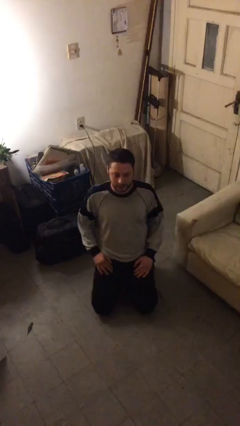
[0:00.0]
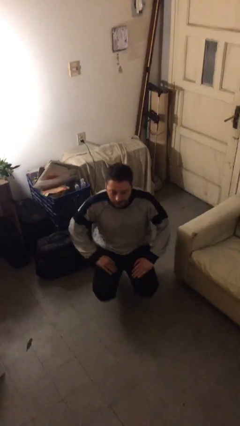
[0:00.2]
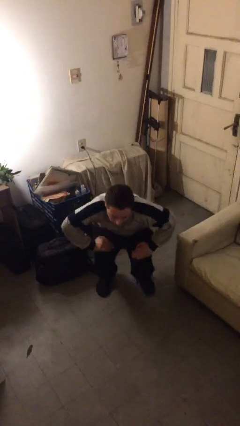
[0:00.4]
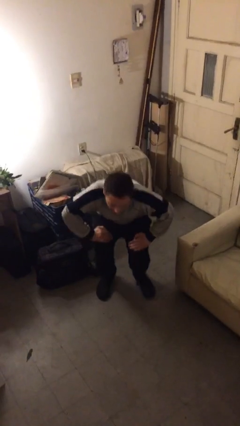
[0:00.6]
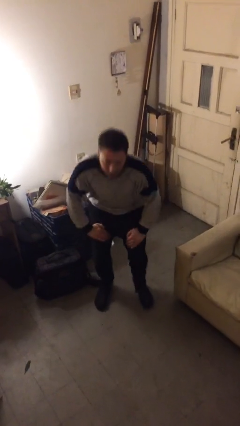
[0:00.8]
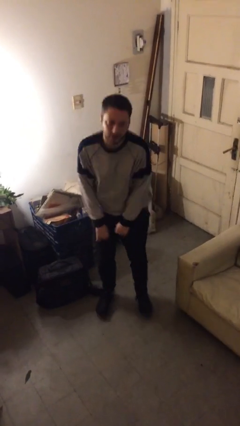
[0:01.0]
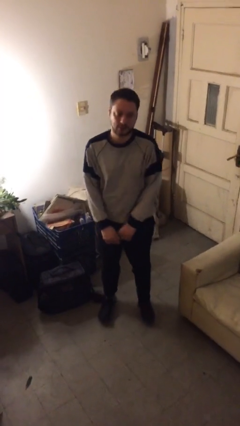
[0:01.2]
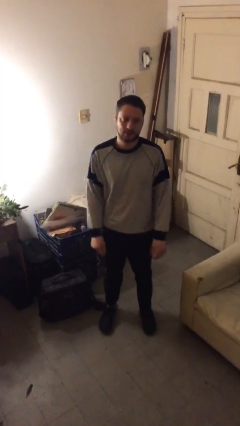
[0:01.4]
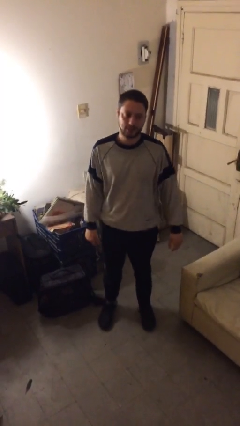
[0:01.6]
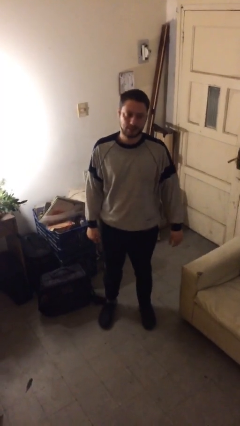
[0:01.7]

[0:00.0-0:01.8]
person stands up from floor

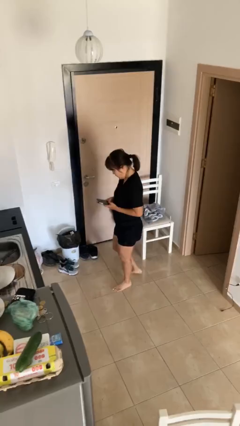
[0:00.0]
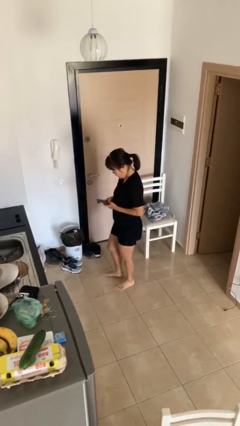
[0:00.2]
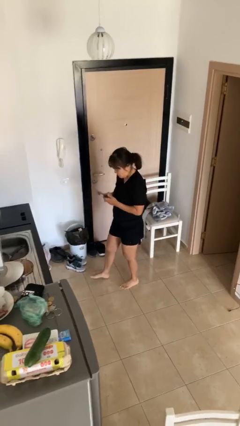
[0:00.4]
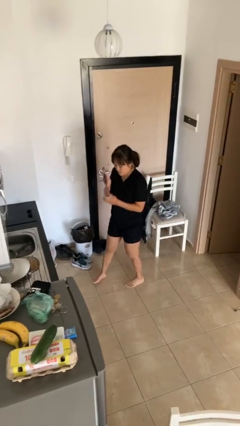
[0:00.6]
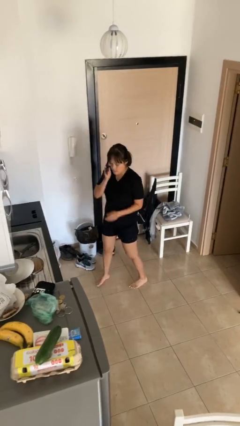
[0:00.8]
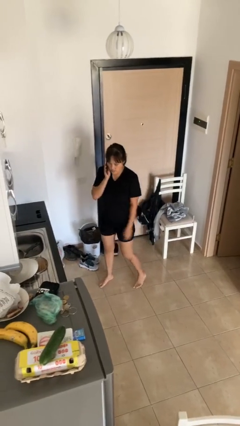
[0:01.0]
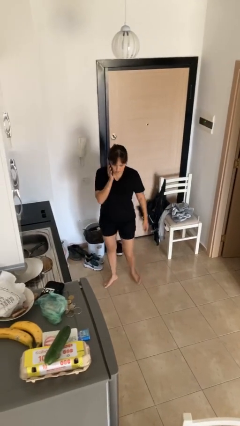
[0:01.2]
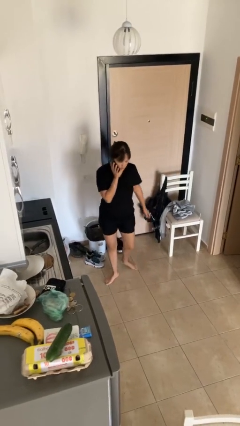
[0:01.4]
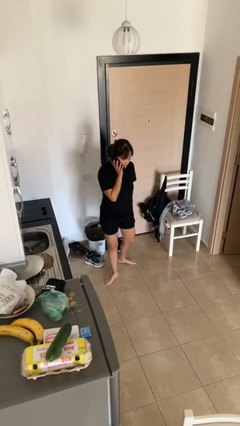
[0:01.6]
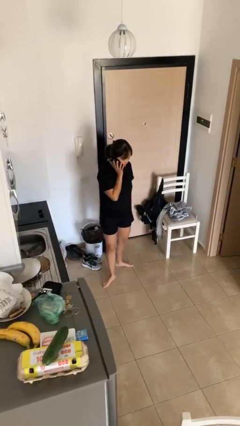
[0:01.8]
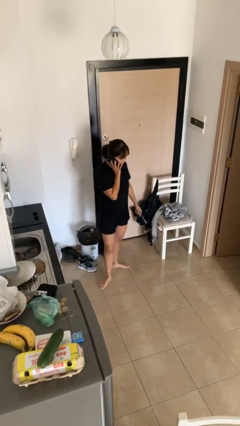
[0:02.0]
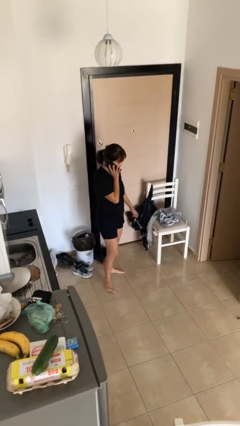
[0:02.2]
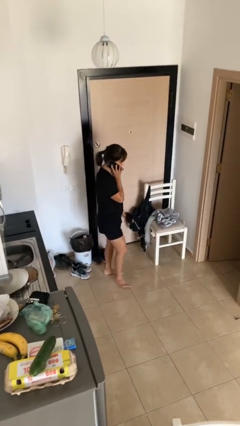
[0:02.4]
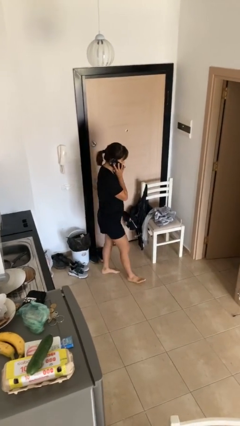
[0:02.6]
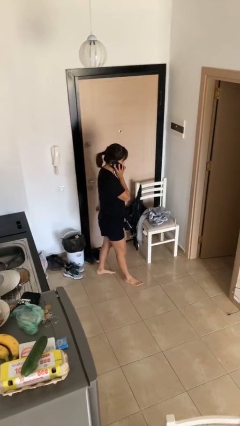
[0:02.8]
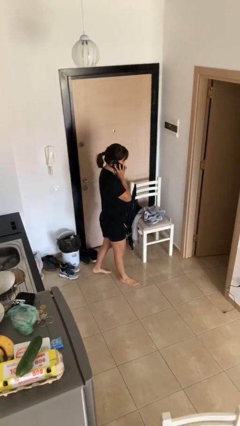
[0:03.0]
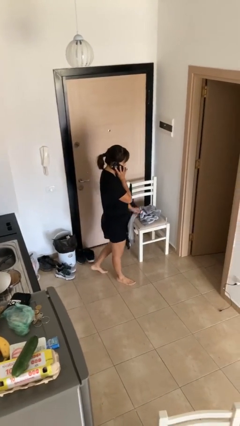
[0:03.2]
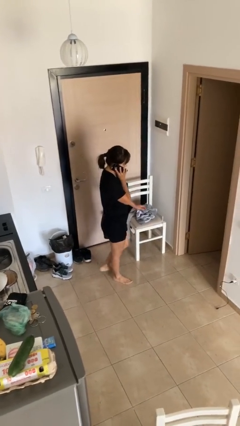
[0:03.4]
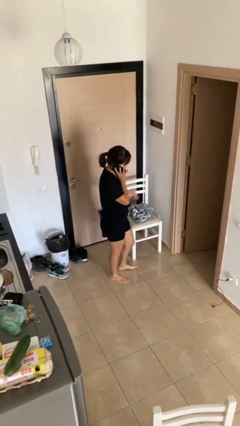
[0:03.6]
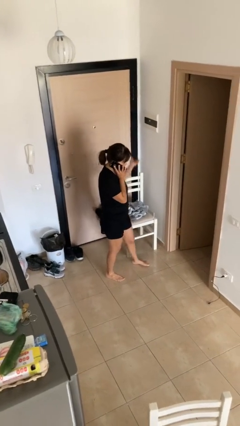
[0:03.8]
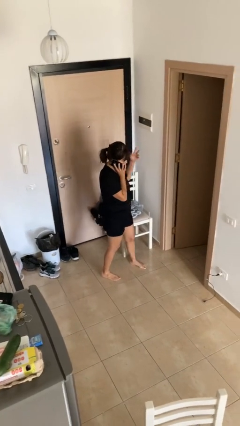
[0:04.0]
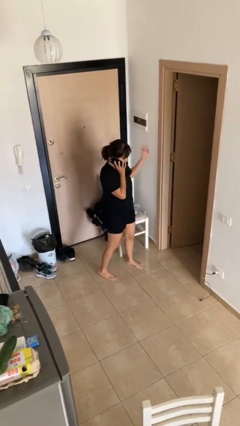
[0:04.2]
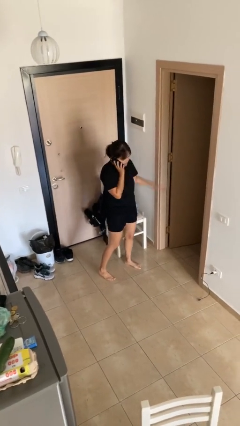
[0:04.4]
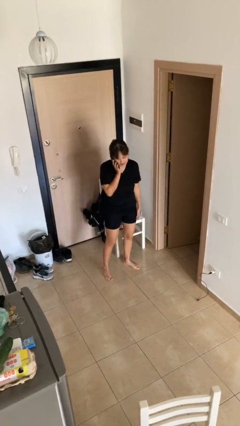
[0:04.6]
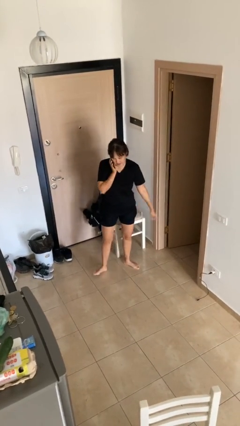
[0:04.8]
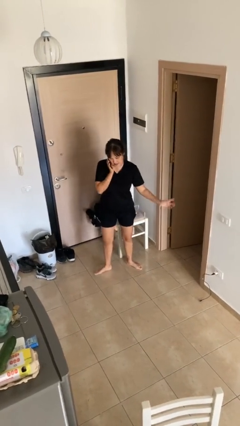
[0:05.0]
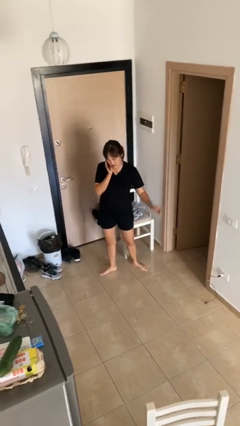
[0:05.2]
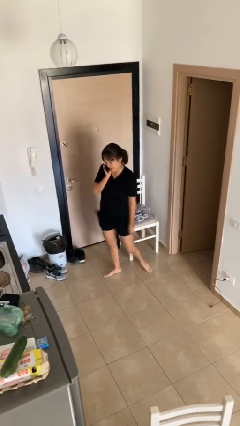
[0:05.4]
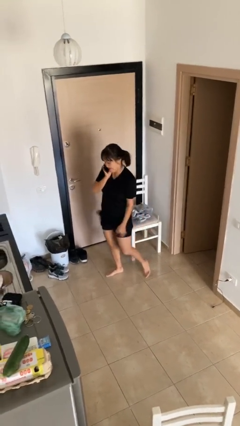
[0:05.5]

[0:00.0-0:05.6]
person talks on phone

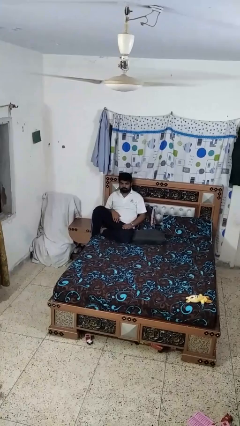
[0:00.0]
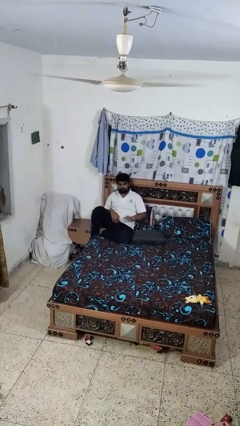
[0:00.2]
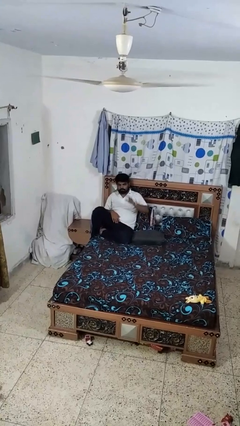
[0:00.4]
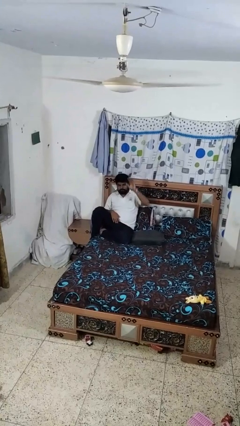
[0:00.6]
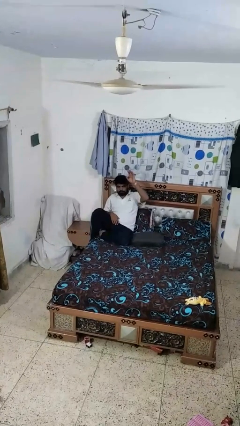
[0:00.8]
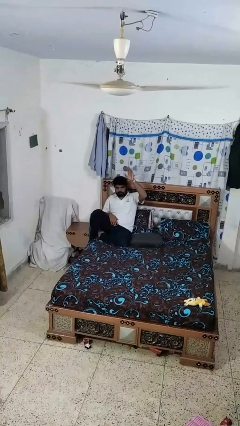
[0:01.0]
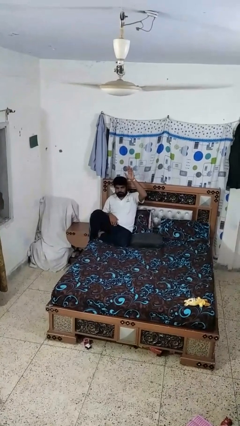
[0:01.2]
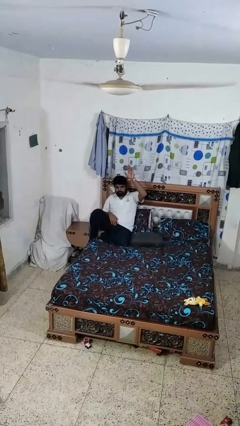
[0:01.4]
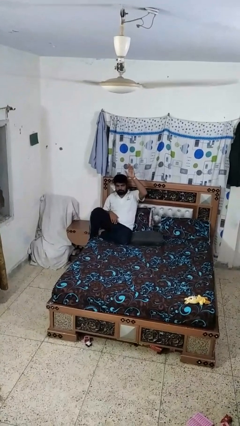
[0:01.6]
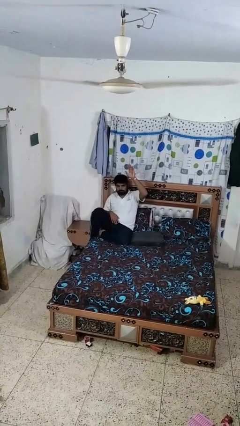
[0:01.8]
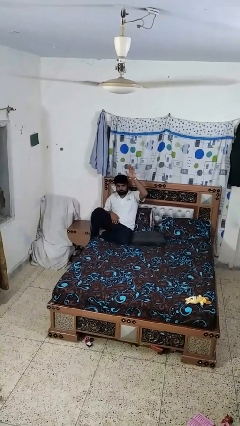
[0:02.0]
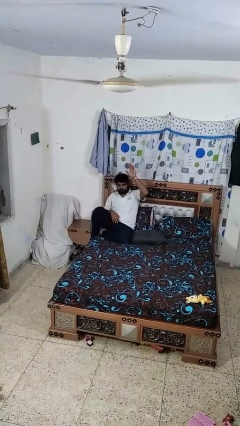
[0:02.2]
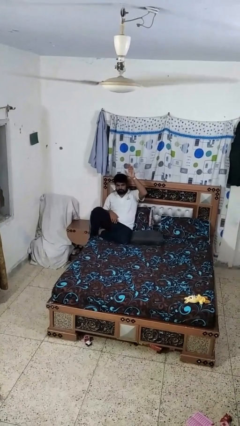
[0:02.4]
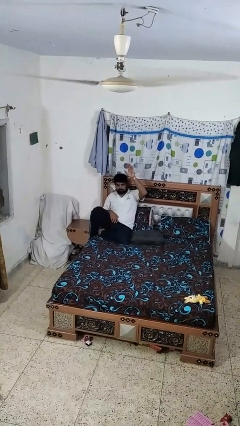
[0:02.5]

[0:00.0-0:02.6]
person gestures raise hand

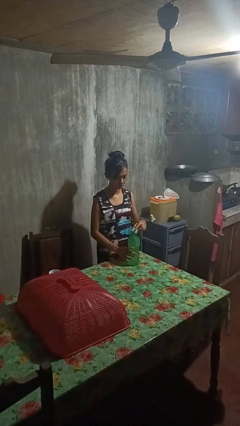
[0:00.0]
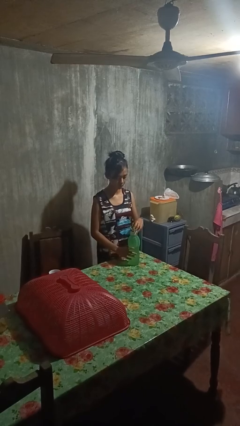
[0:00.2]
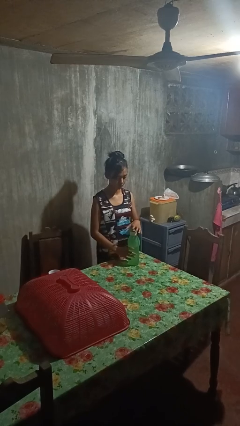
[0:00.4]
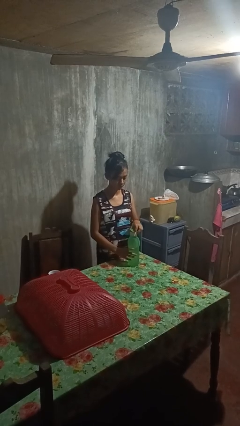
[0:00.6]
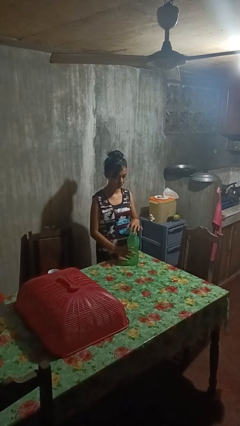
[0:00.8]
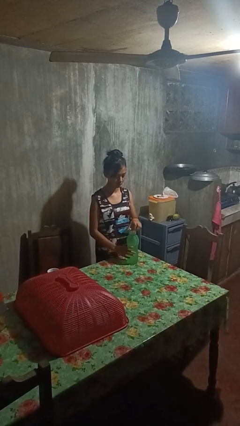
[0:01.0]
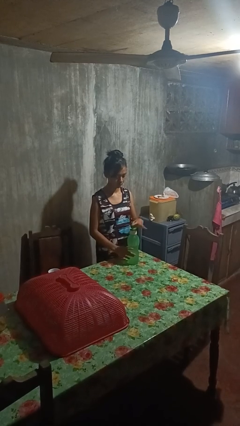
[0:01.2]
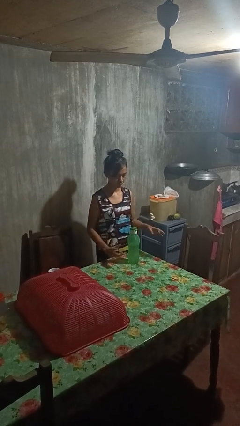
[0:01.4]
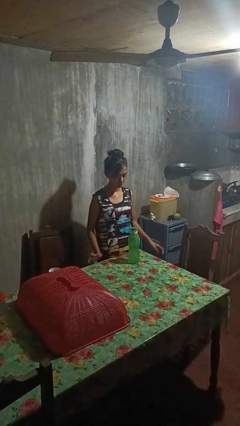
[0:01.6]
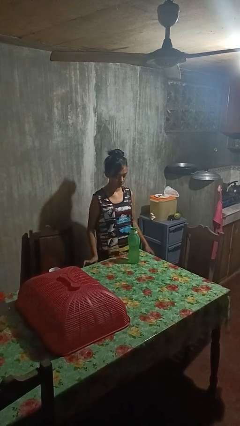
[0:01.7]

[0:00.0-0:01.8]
person screws lid to bottle

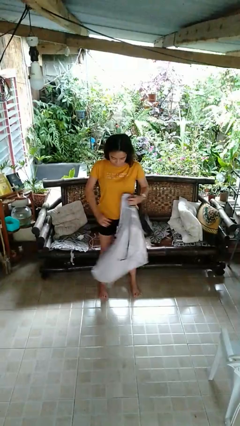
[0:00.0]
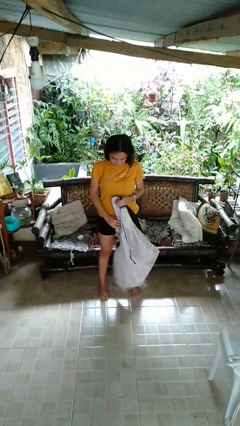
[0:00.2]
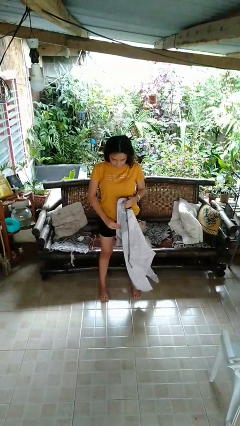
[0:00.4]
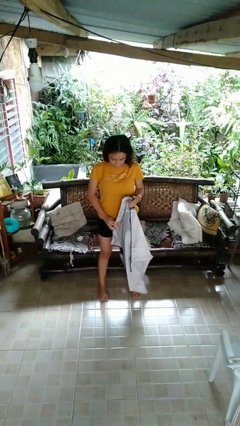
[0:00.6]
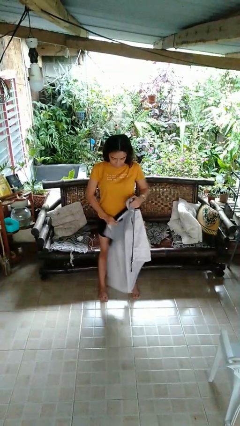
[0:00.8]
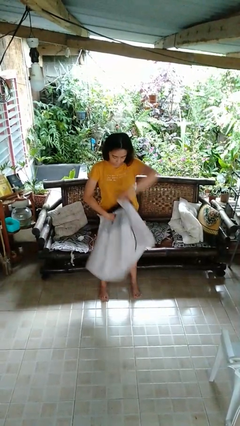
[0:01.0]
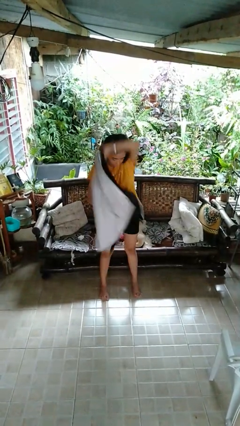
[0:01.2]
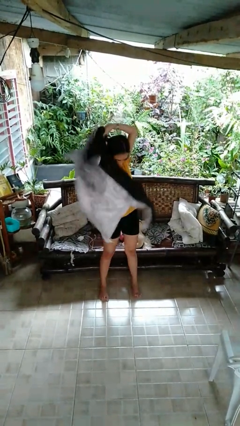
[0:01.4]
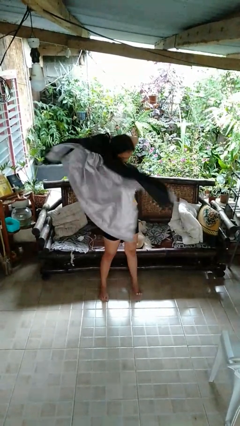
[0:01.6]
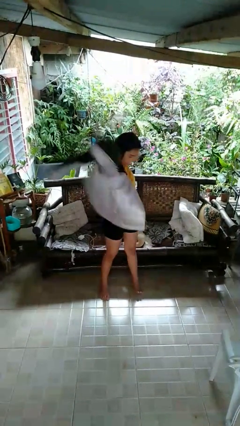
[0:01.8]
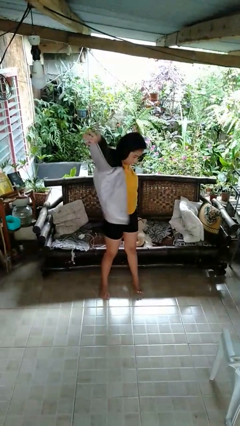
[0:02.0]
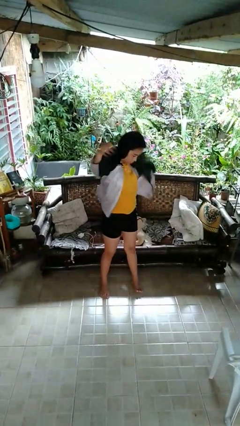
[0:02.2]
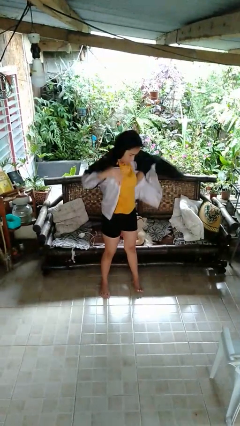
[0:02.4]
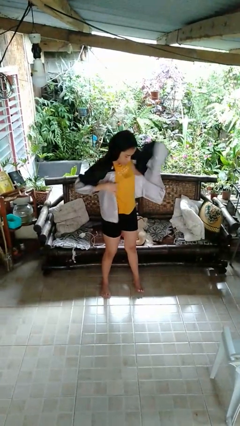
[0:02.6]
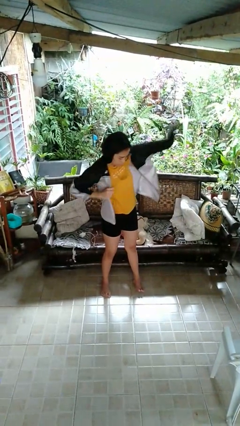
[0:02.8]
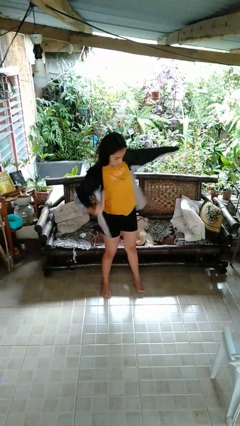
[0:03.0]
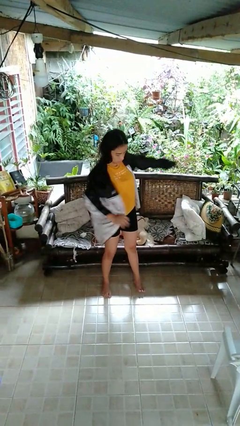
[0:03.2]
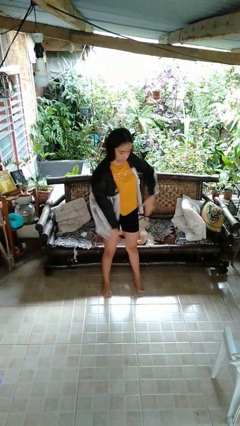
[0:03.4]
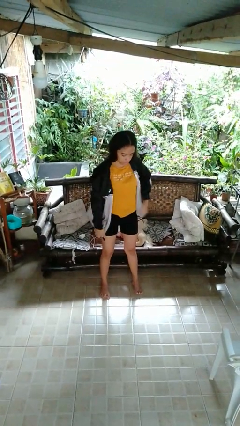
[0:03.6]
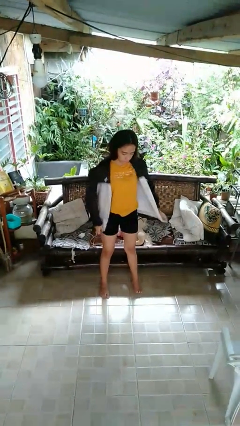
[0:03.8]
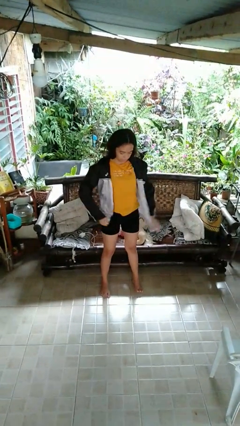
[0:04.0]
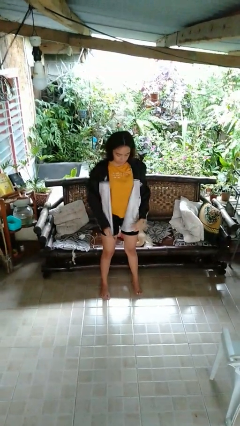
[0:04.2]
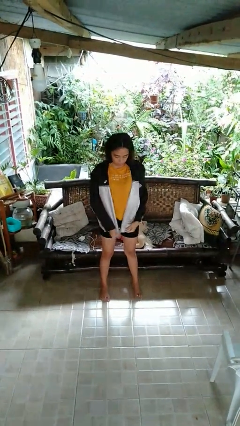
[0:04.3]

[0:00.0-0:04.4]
person puts on jacket

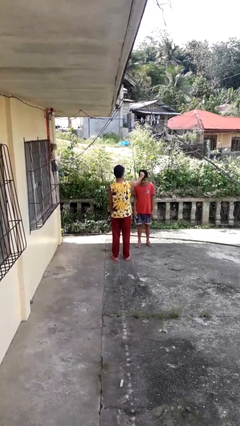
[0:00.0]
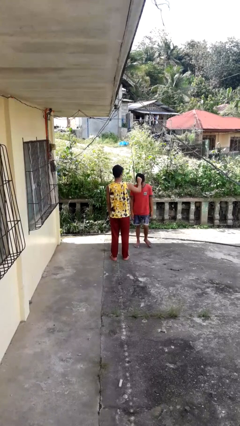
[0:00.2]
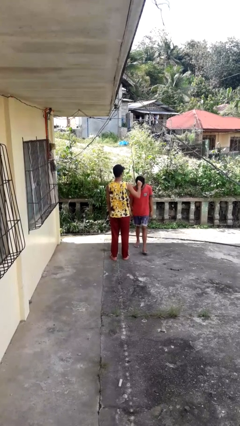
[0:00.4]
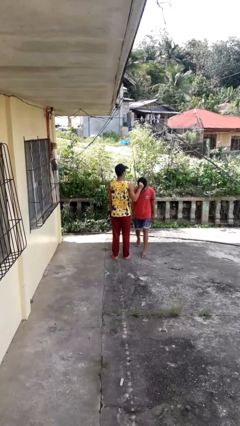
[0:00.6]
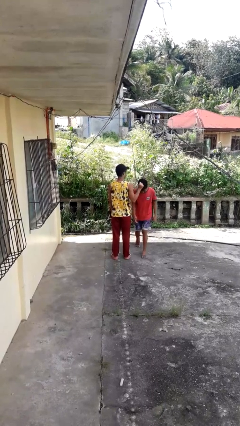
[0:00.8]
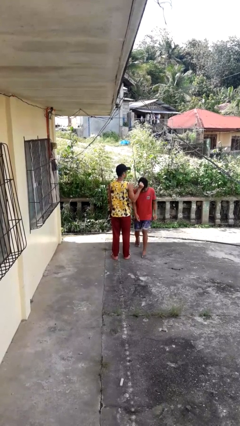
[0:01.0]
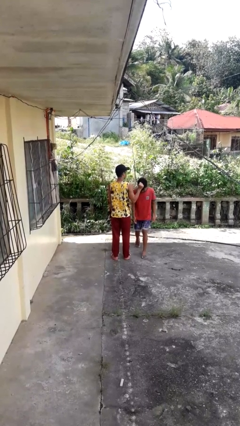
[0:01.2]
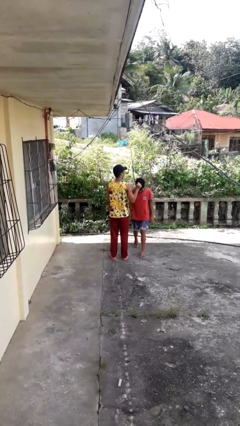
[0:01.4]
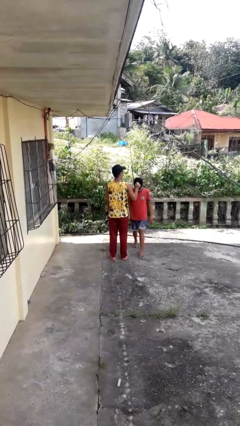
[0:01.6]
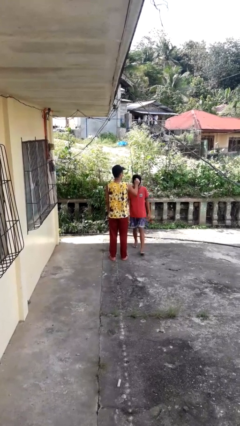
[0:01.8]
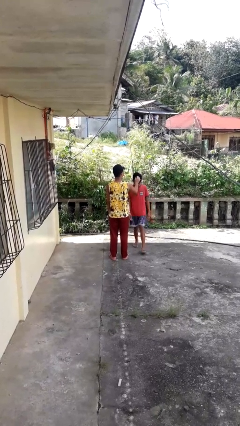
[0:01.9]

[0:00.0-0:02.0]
person grabs person by hair
